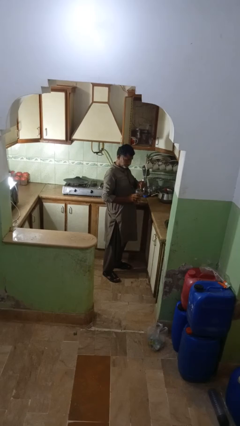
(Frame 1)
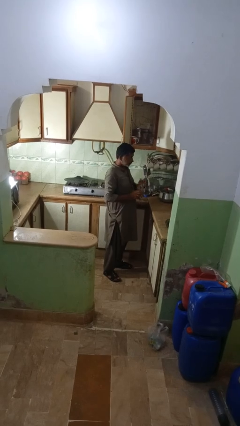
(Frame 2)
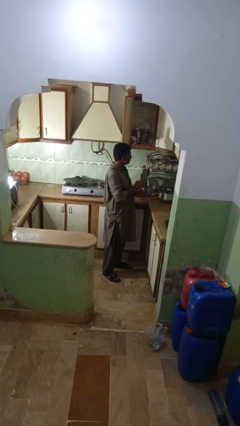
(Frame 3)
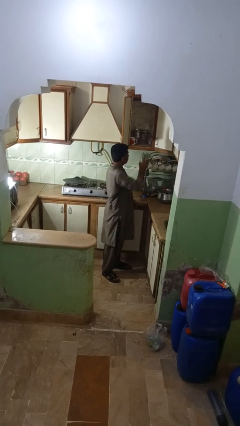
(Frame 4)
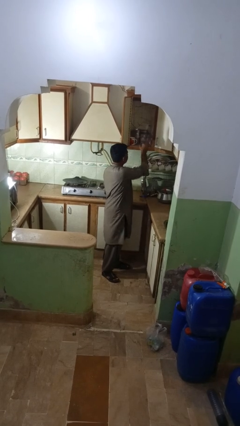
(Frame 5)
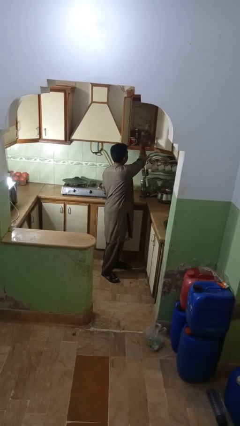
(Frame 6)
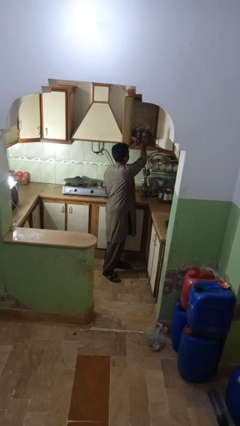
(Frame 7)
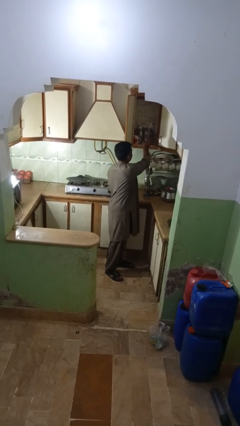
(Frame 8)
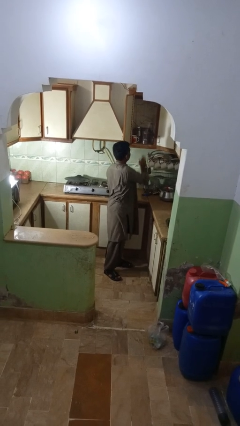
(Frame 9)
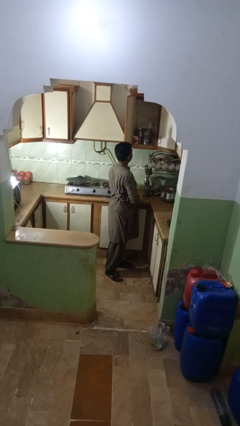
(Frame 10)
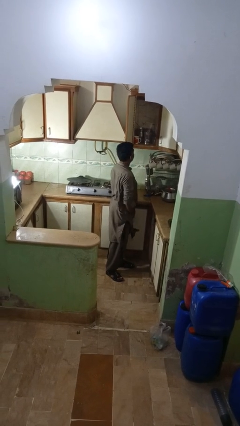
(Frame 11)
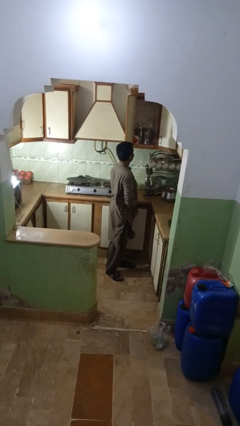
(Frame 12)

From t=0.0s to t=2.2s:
person puts object into kitchen drawer

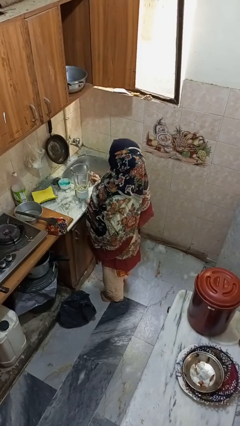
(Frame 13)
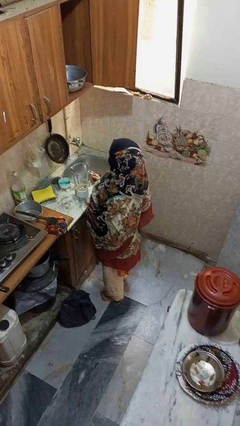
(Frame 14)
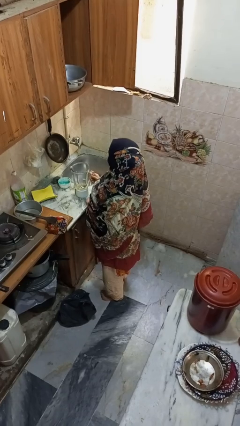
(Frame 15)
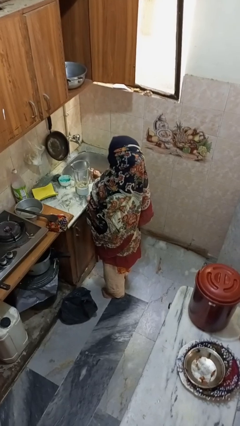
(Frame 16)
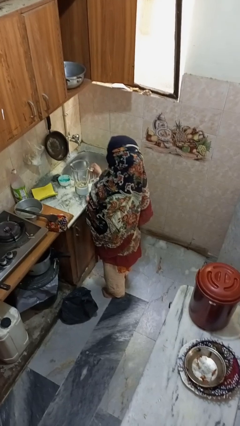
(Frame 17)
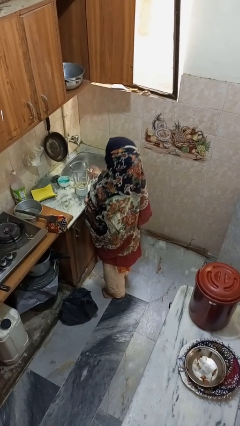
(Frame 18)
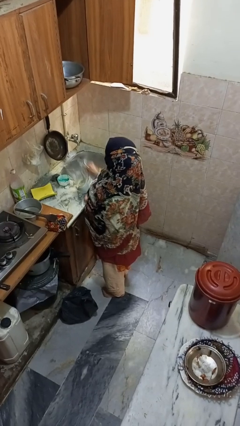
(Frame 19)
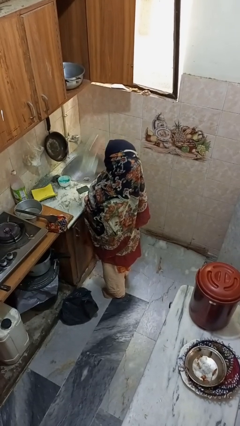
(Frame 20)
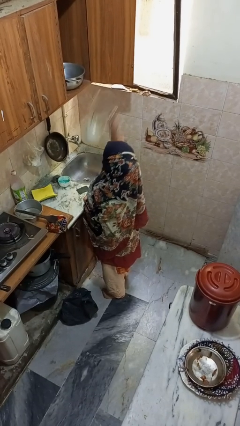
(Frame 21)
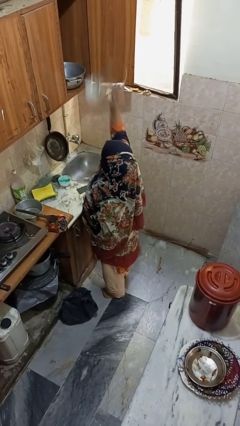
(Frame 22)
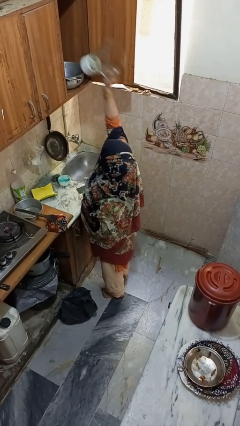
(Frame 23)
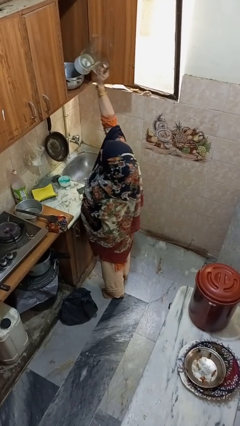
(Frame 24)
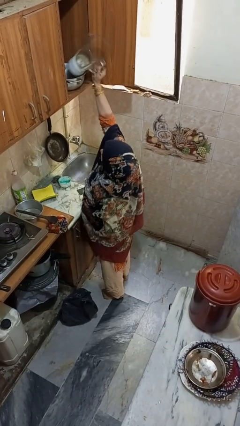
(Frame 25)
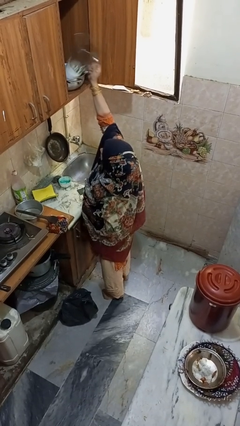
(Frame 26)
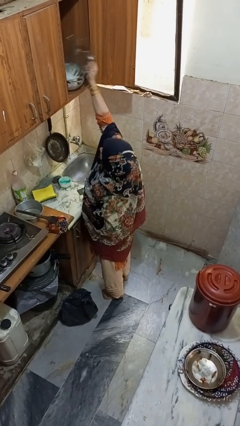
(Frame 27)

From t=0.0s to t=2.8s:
person takes object from cabinet

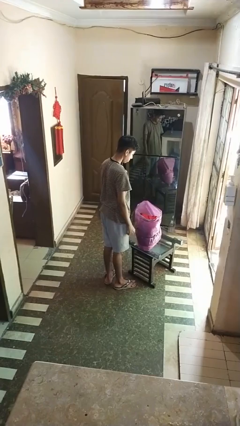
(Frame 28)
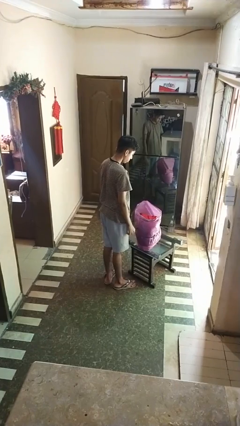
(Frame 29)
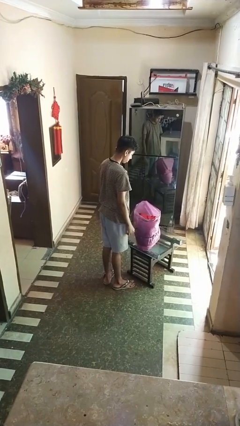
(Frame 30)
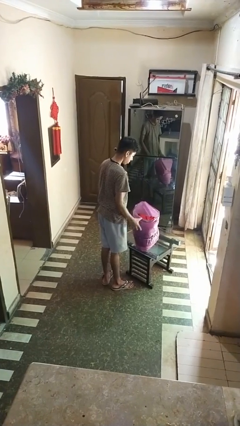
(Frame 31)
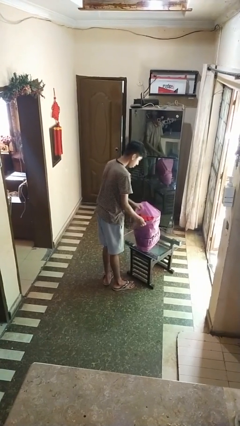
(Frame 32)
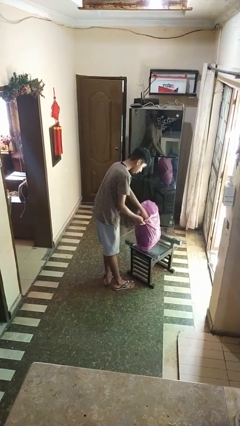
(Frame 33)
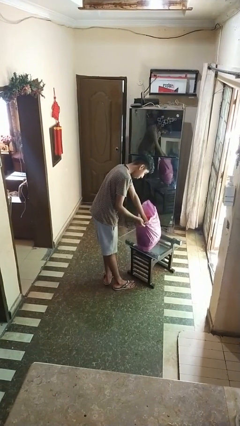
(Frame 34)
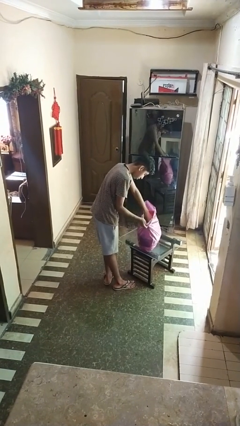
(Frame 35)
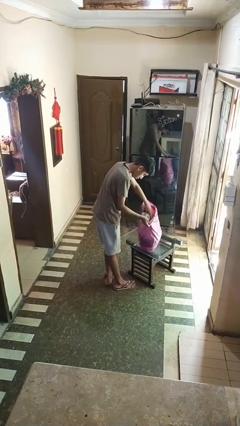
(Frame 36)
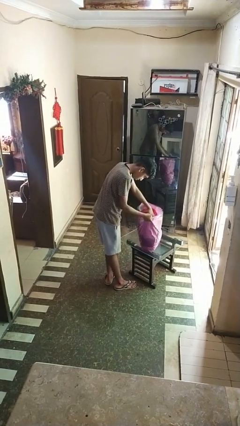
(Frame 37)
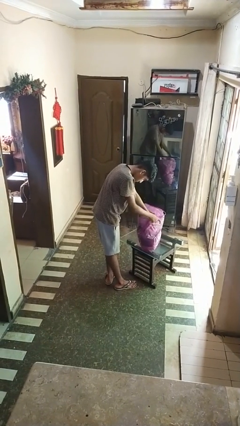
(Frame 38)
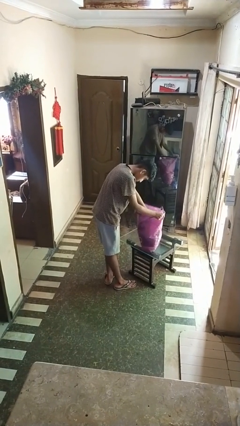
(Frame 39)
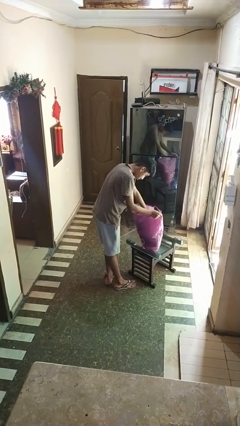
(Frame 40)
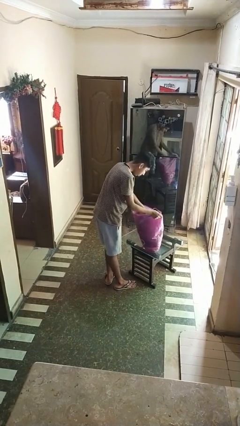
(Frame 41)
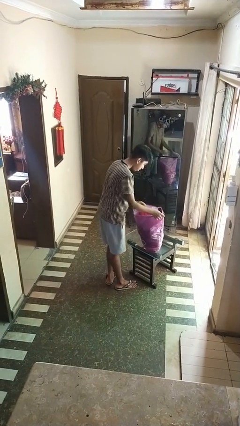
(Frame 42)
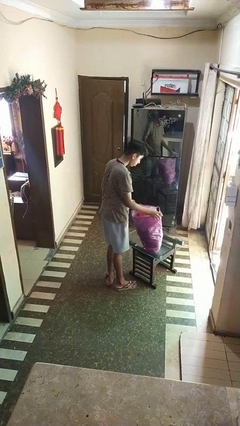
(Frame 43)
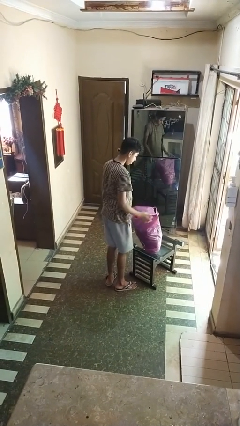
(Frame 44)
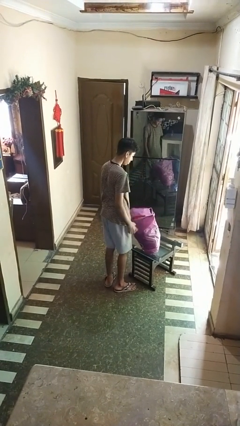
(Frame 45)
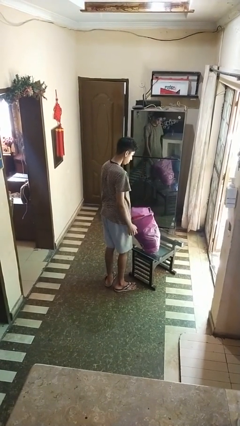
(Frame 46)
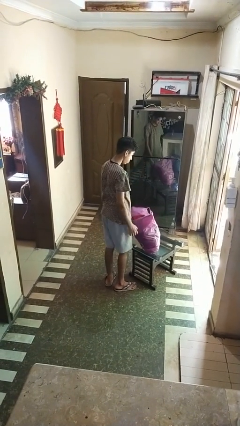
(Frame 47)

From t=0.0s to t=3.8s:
person searches in bag

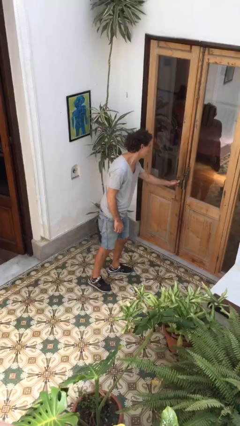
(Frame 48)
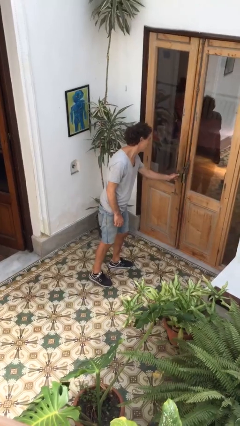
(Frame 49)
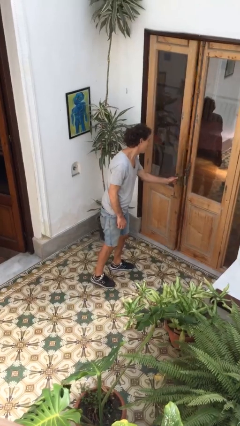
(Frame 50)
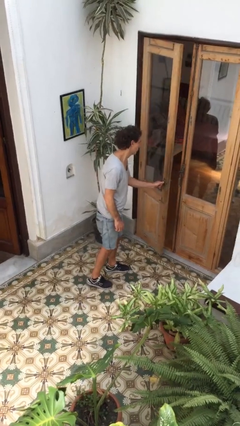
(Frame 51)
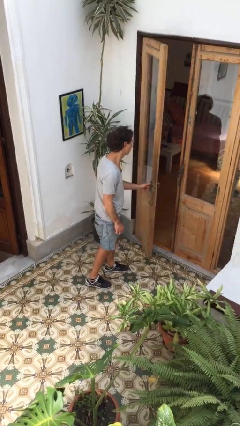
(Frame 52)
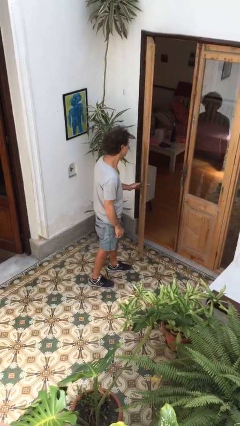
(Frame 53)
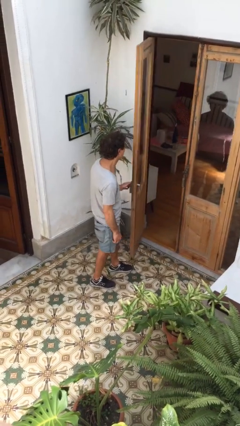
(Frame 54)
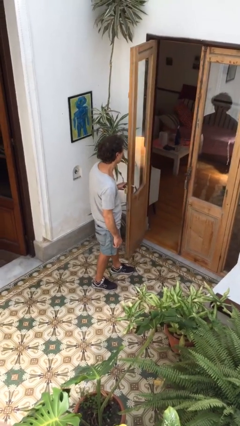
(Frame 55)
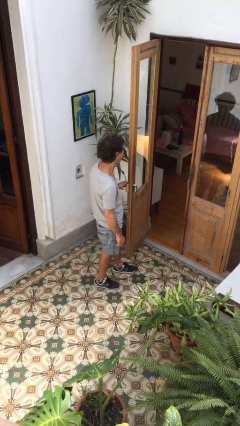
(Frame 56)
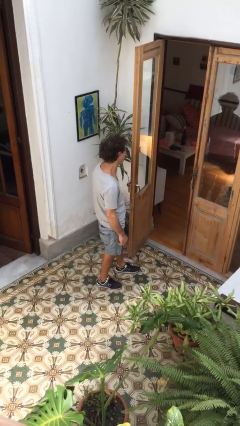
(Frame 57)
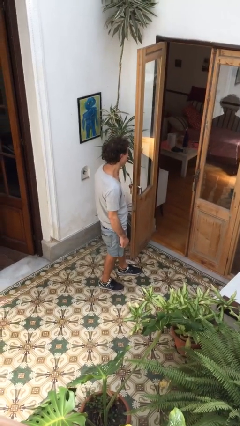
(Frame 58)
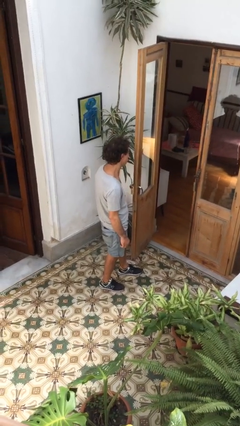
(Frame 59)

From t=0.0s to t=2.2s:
person opens facility door

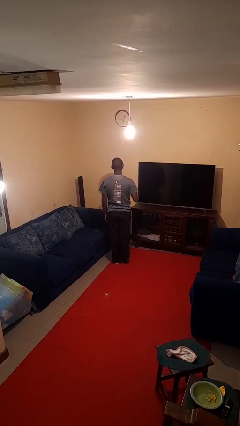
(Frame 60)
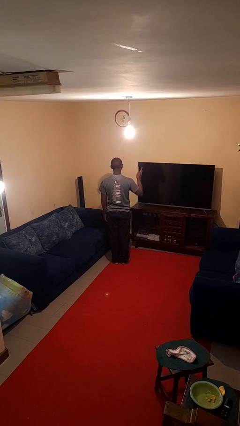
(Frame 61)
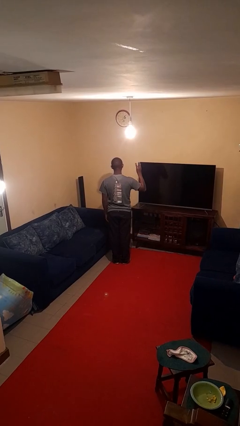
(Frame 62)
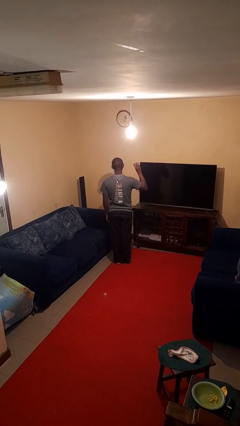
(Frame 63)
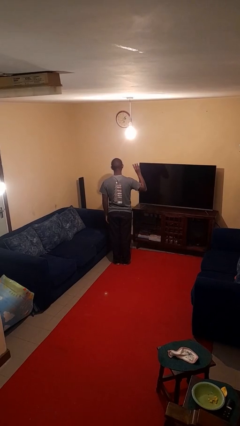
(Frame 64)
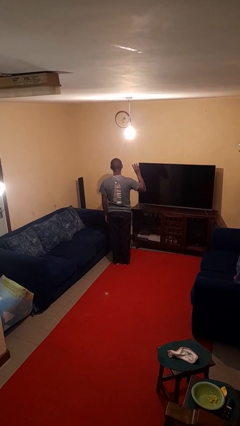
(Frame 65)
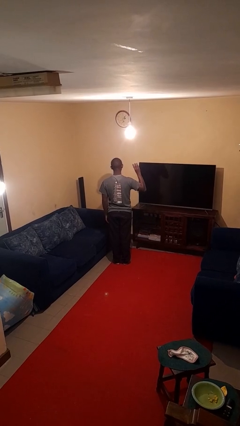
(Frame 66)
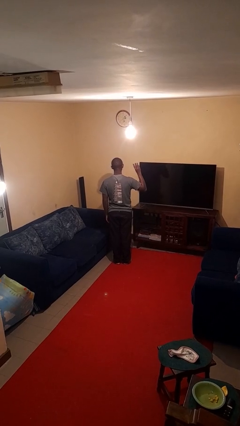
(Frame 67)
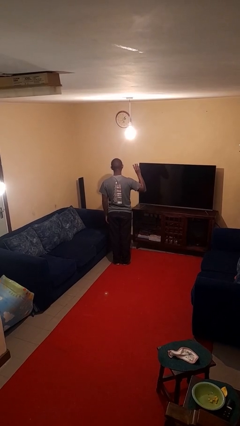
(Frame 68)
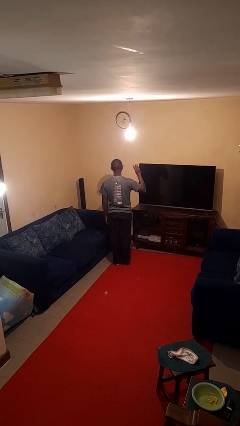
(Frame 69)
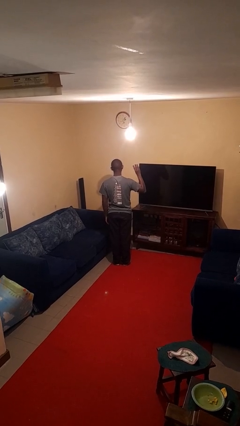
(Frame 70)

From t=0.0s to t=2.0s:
person gestures number three

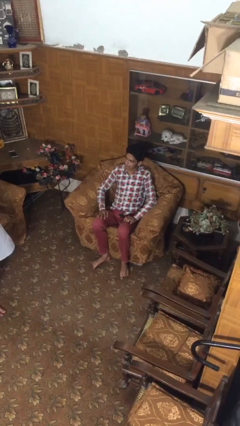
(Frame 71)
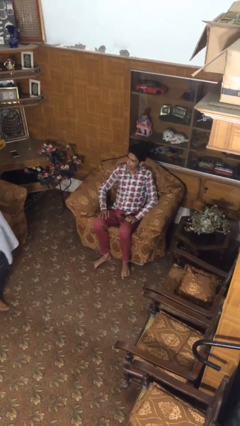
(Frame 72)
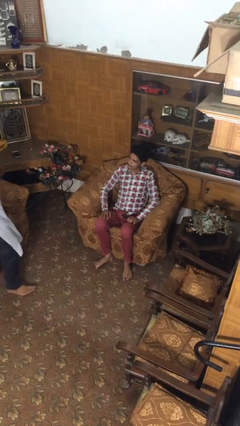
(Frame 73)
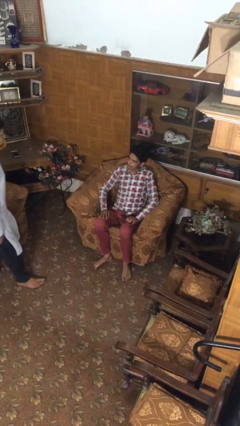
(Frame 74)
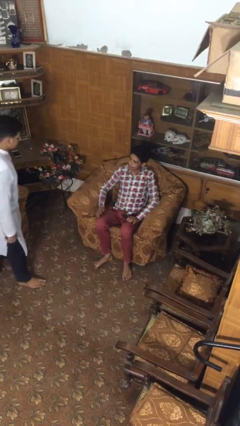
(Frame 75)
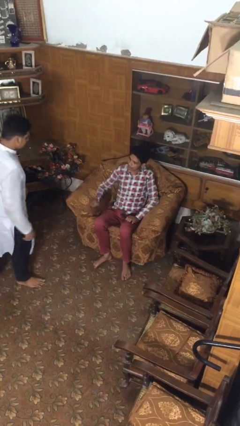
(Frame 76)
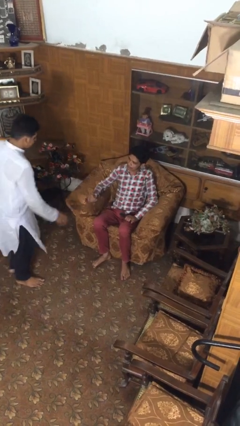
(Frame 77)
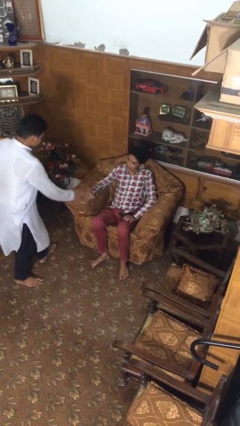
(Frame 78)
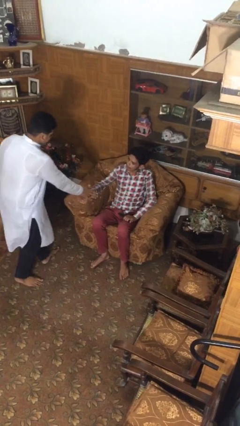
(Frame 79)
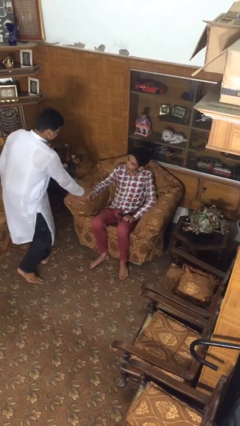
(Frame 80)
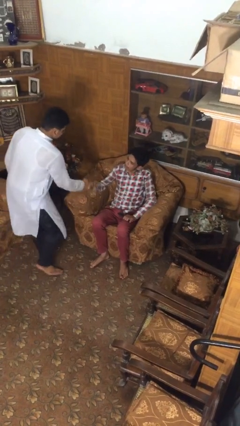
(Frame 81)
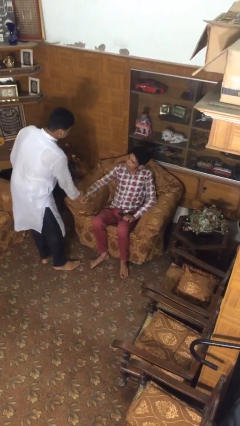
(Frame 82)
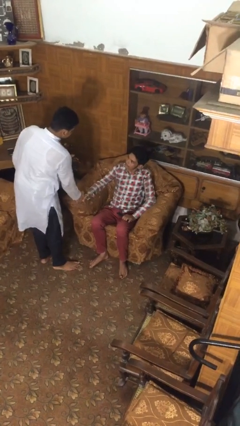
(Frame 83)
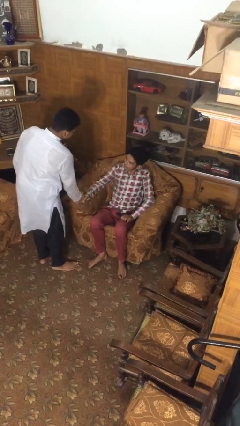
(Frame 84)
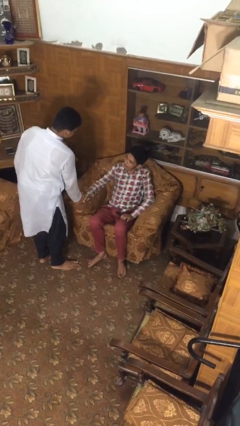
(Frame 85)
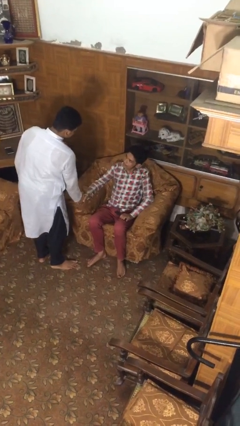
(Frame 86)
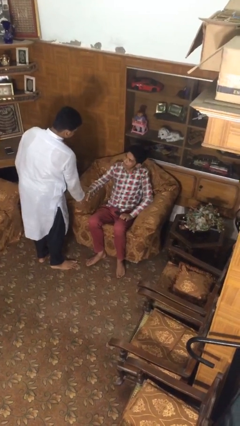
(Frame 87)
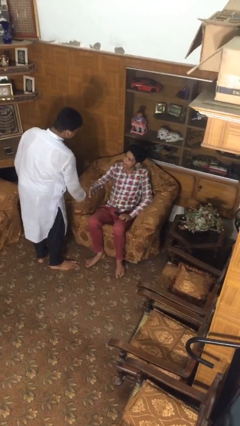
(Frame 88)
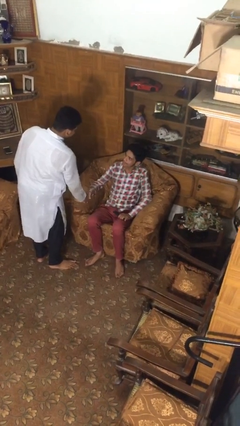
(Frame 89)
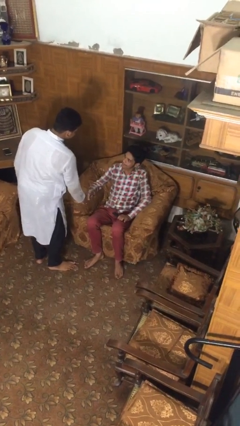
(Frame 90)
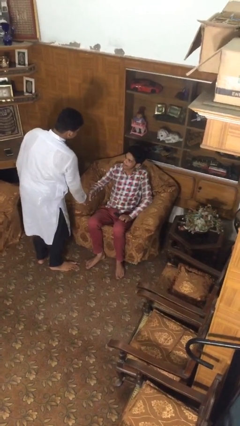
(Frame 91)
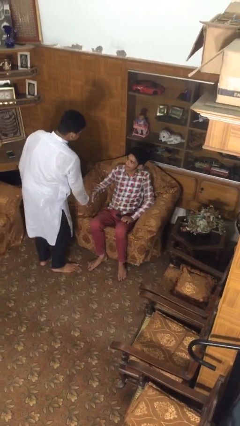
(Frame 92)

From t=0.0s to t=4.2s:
person shakes hand

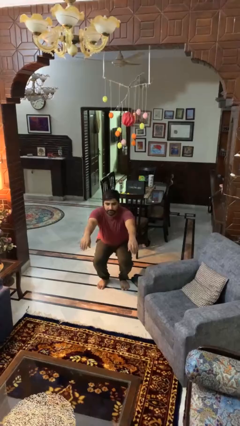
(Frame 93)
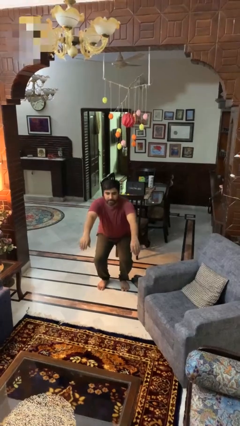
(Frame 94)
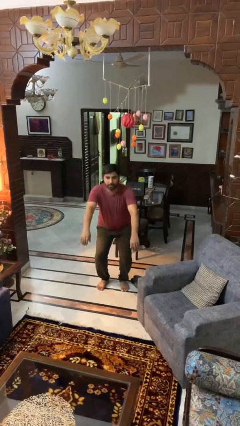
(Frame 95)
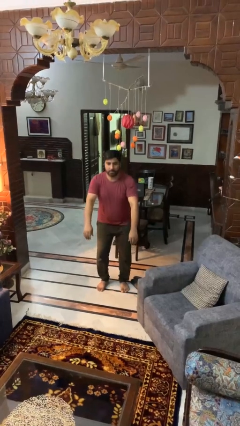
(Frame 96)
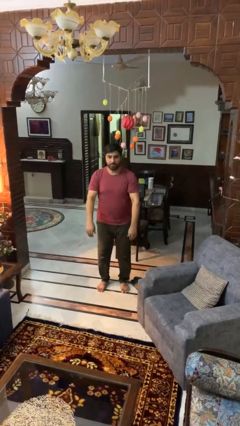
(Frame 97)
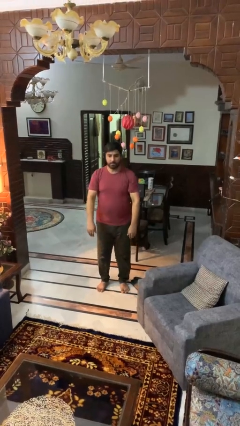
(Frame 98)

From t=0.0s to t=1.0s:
person stands up
